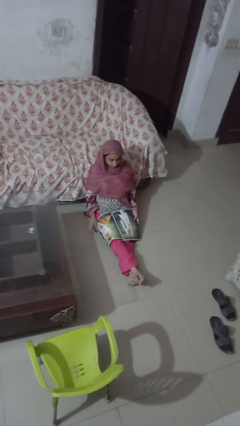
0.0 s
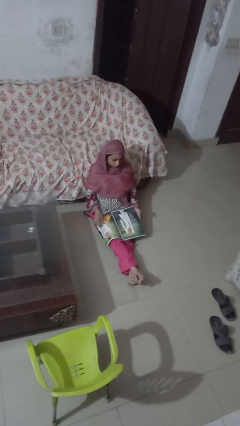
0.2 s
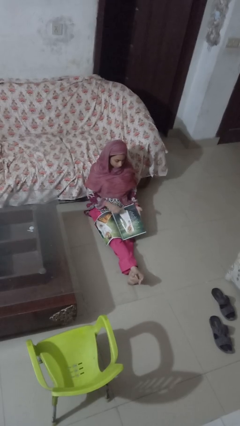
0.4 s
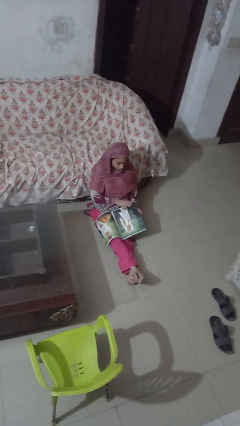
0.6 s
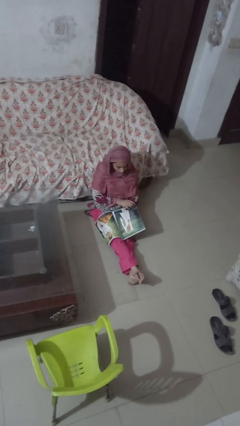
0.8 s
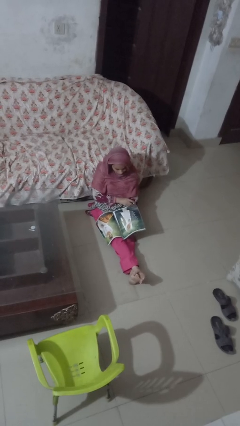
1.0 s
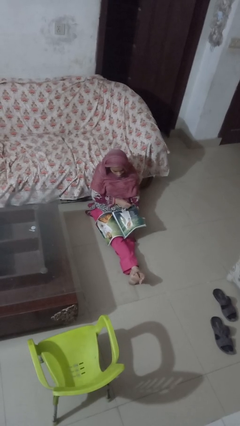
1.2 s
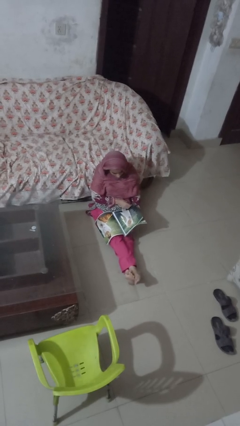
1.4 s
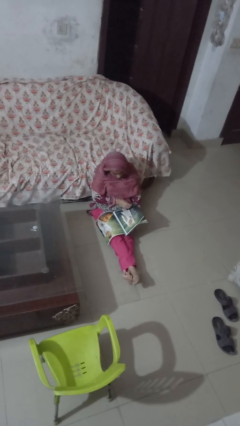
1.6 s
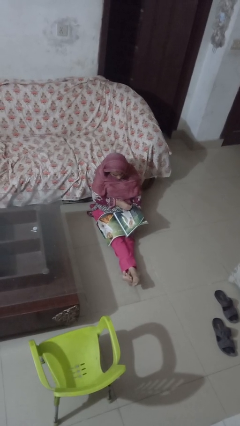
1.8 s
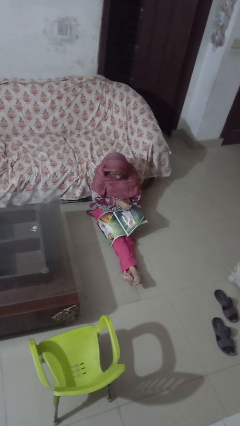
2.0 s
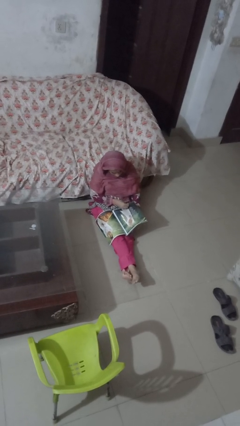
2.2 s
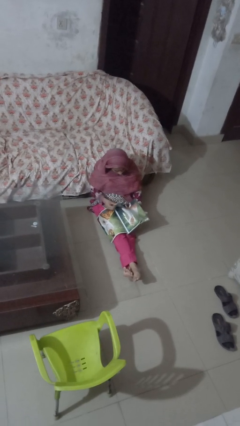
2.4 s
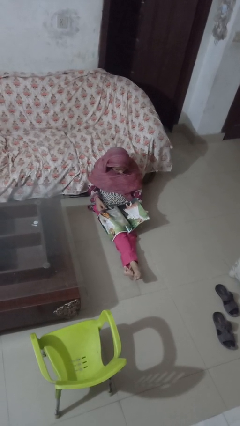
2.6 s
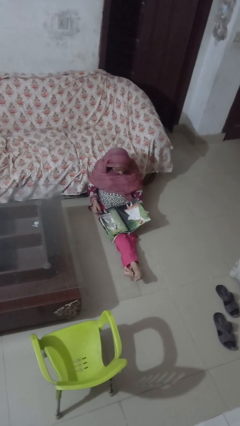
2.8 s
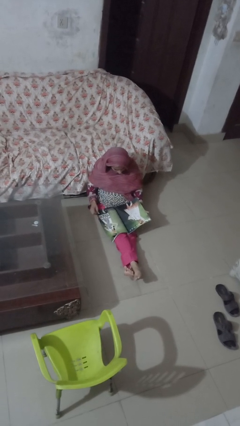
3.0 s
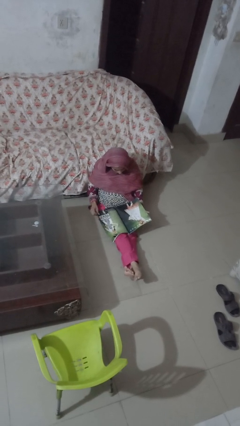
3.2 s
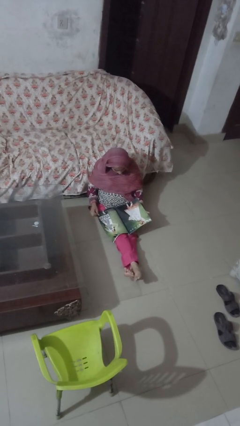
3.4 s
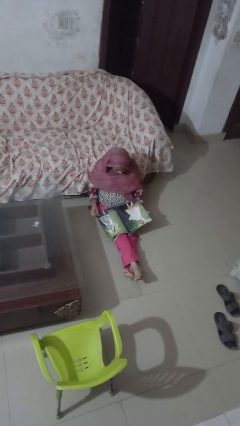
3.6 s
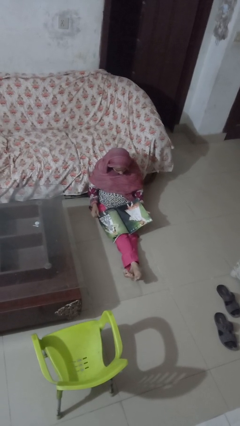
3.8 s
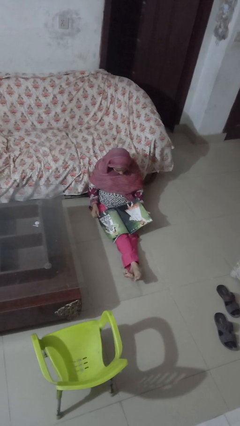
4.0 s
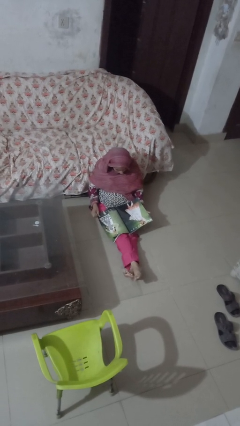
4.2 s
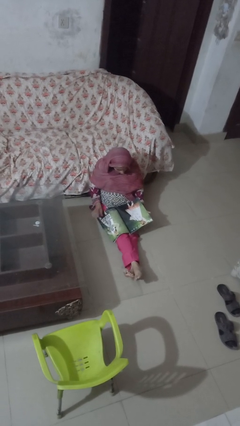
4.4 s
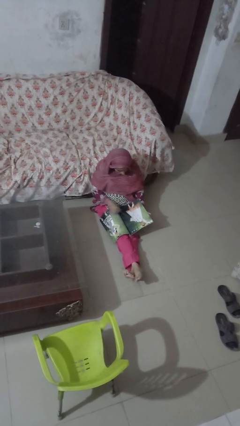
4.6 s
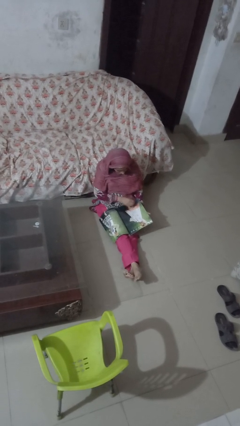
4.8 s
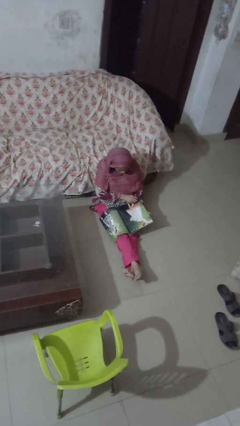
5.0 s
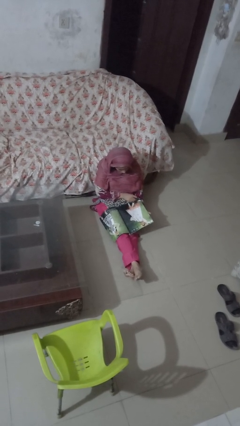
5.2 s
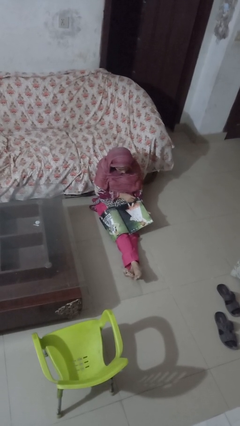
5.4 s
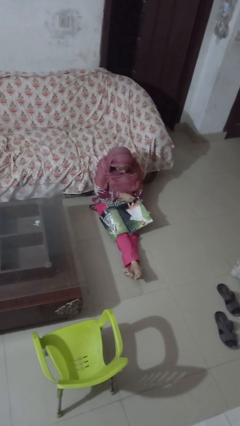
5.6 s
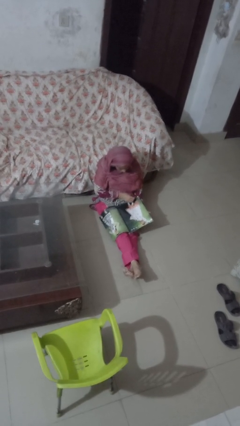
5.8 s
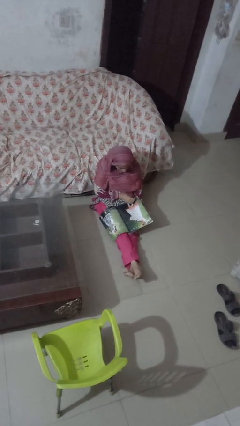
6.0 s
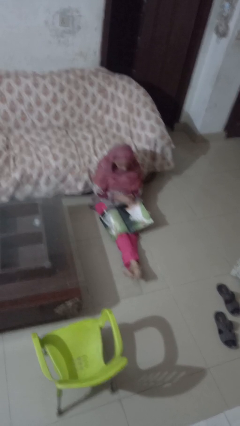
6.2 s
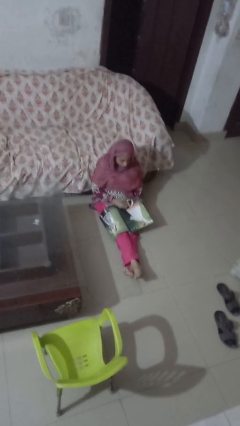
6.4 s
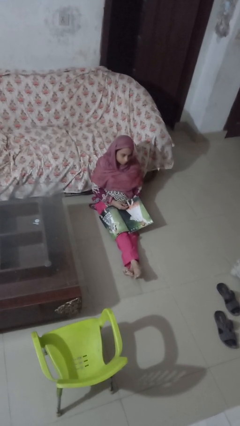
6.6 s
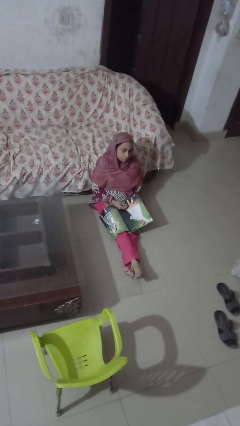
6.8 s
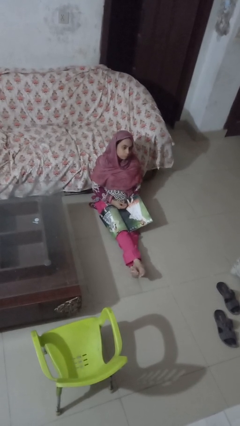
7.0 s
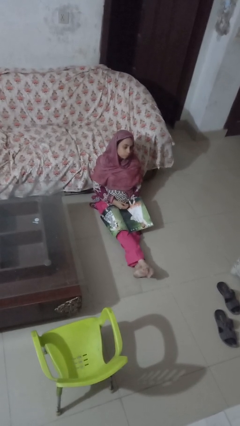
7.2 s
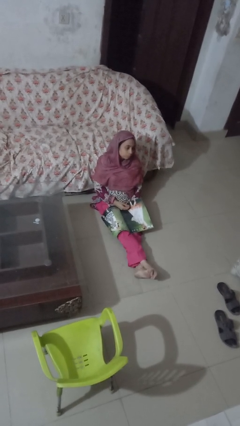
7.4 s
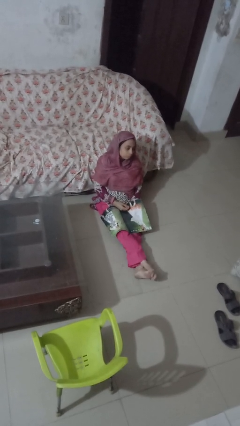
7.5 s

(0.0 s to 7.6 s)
person reads magazine

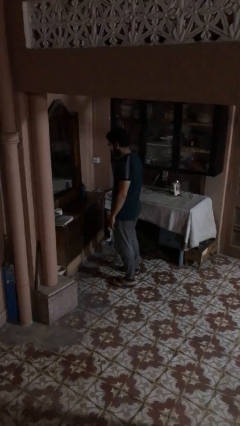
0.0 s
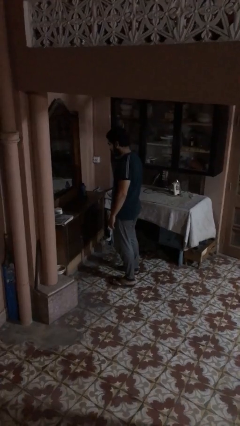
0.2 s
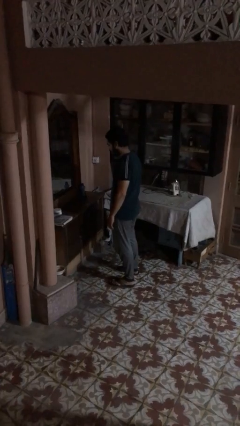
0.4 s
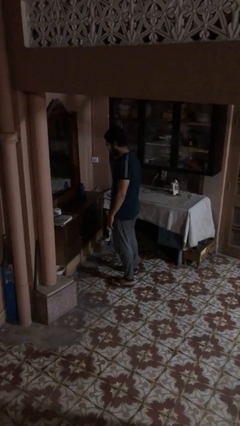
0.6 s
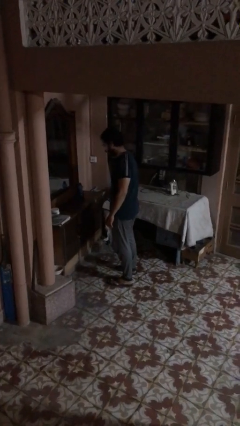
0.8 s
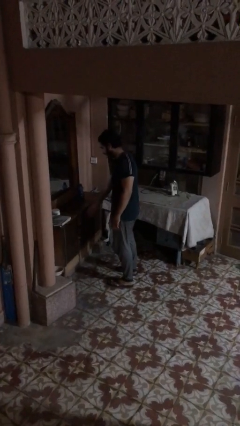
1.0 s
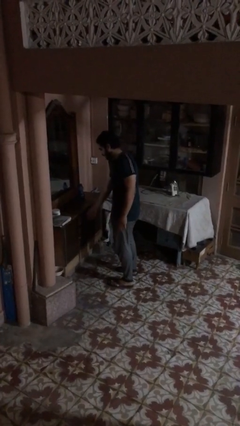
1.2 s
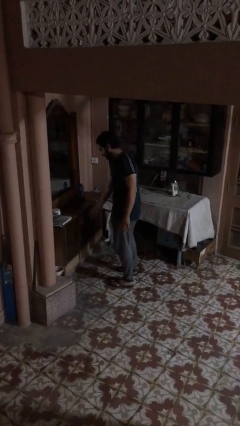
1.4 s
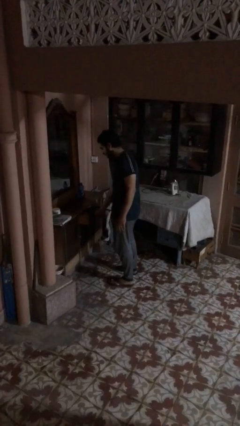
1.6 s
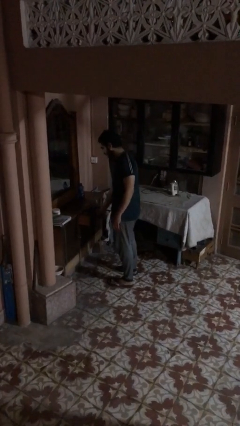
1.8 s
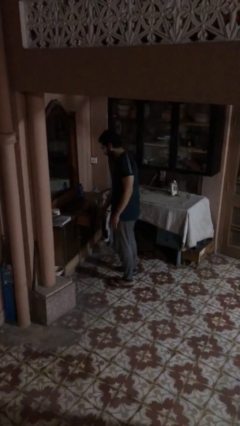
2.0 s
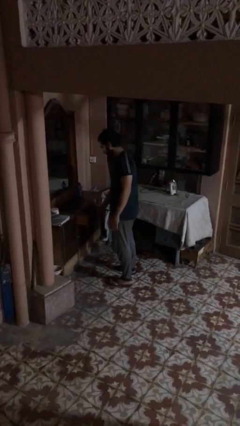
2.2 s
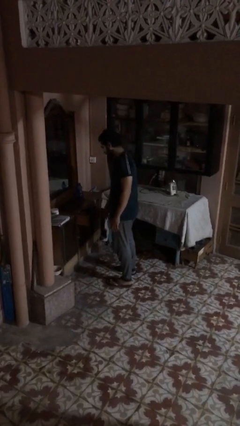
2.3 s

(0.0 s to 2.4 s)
person opens dresser drawer

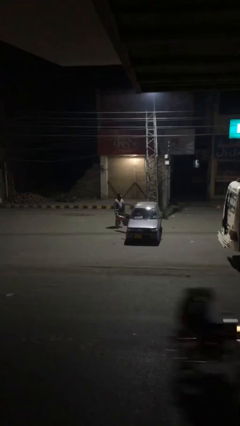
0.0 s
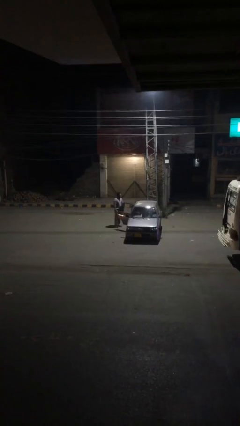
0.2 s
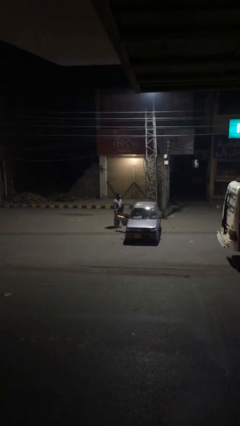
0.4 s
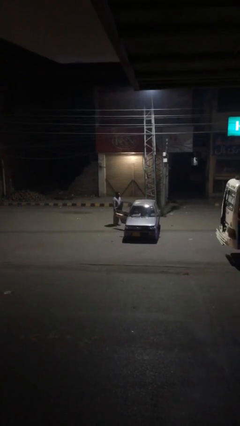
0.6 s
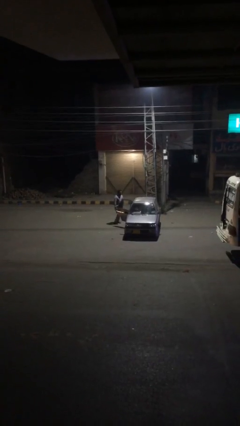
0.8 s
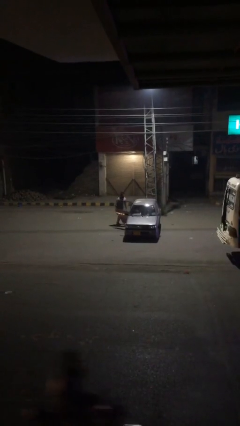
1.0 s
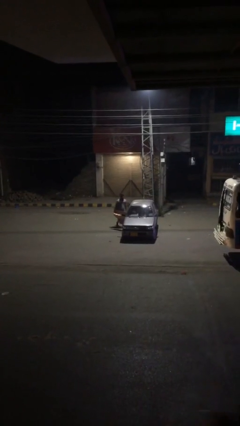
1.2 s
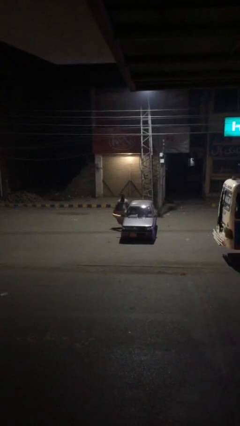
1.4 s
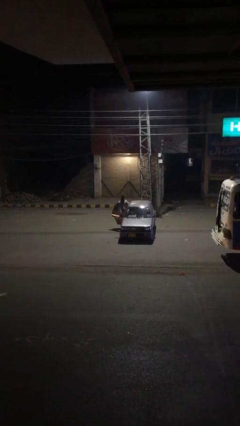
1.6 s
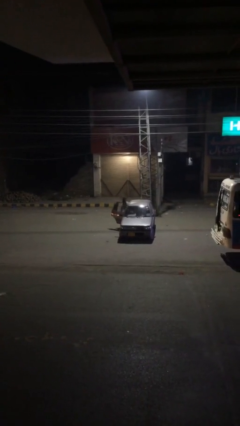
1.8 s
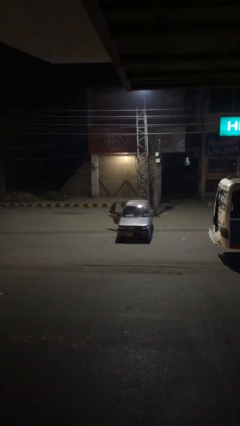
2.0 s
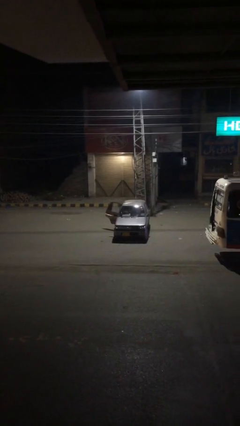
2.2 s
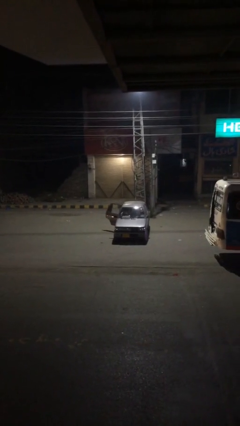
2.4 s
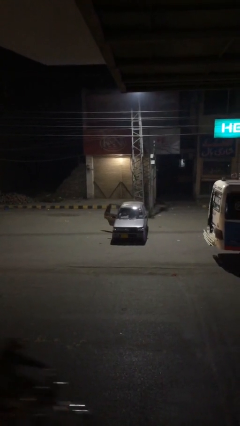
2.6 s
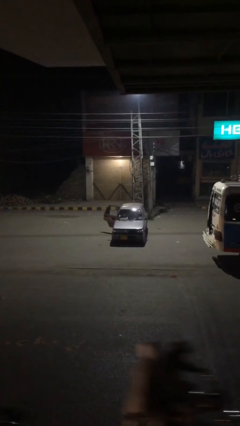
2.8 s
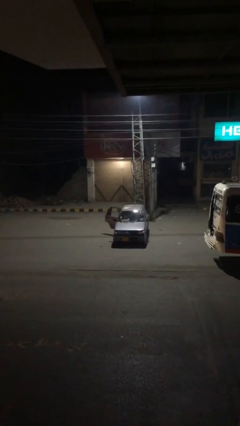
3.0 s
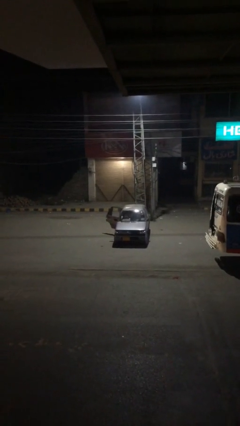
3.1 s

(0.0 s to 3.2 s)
person enters car

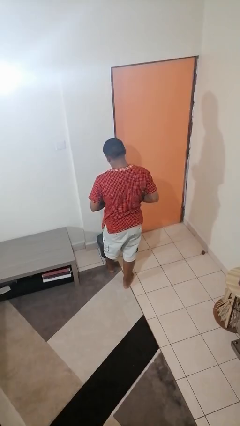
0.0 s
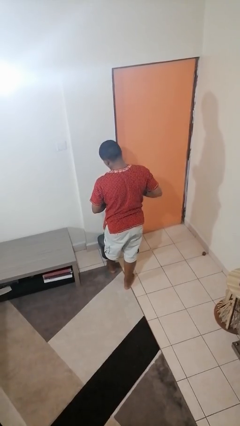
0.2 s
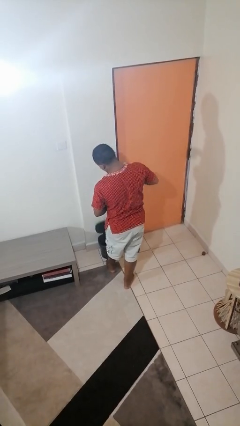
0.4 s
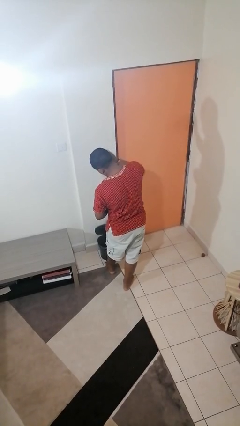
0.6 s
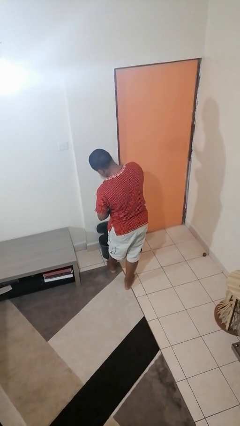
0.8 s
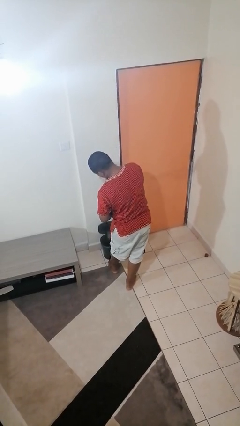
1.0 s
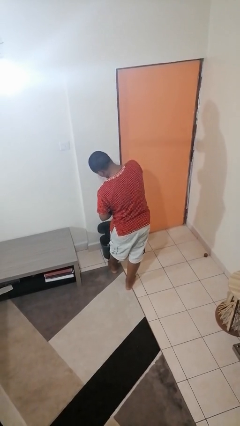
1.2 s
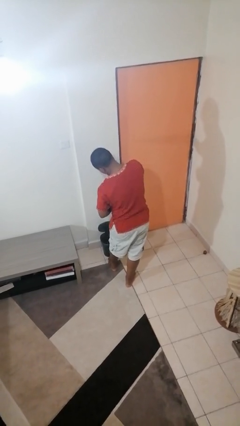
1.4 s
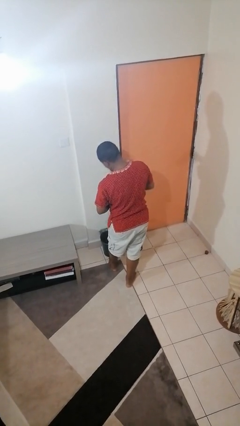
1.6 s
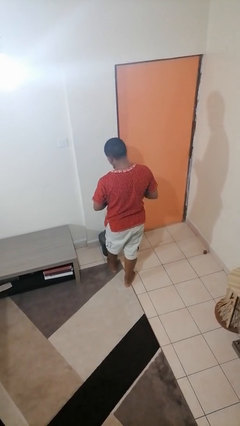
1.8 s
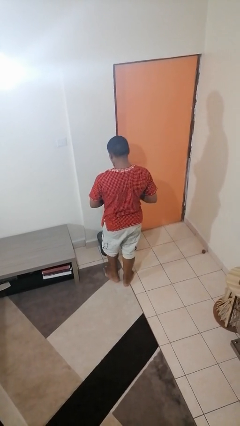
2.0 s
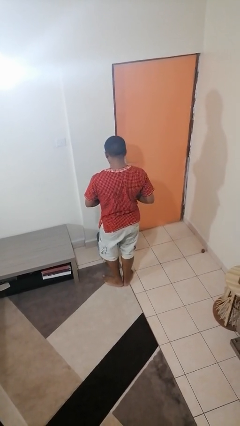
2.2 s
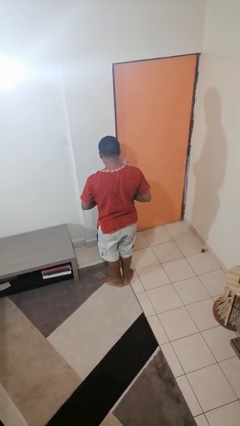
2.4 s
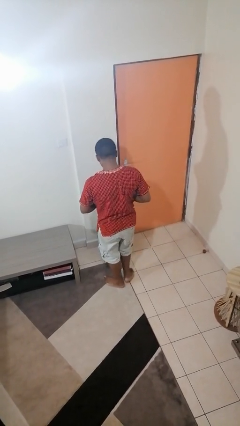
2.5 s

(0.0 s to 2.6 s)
person discards trash

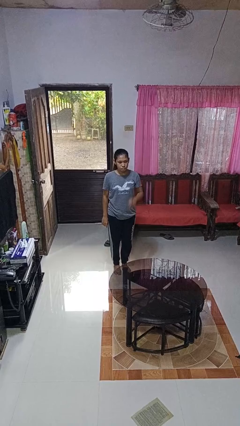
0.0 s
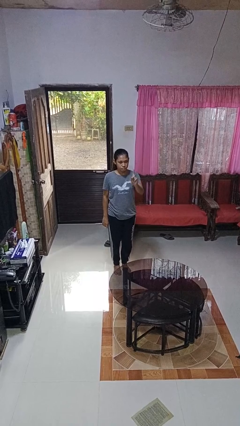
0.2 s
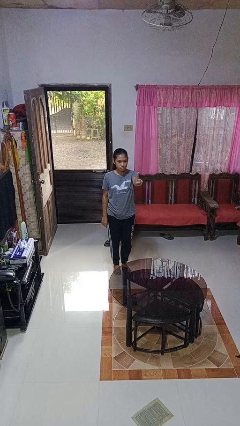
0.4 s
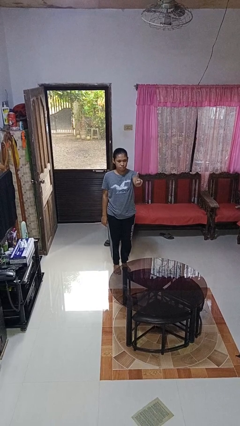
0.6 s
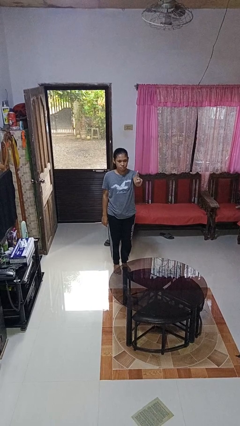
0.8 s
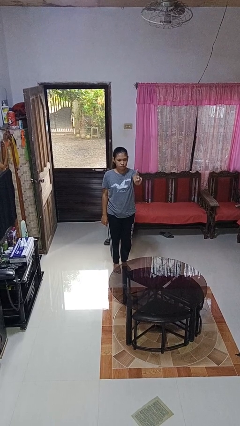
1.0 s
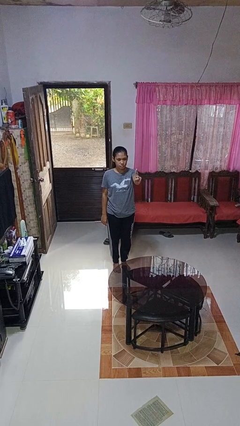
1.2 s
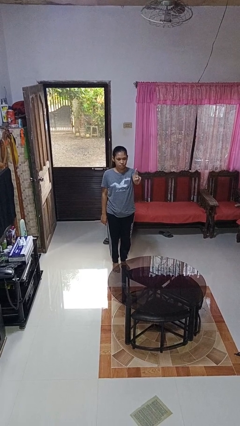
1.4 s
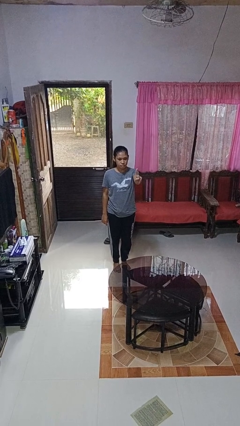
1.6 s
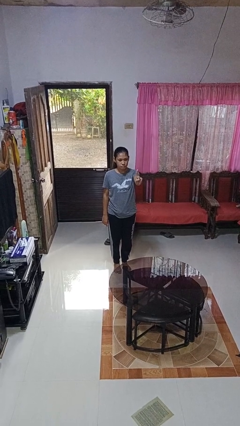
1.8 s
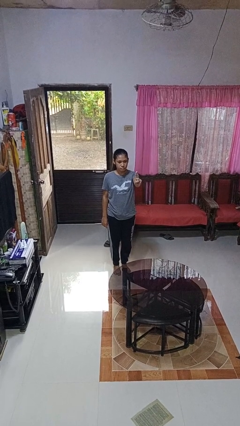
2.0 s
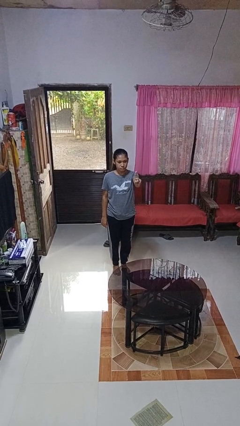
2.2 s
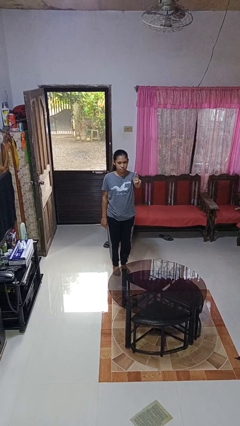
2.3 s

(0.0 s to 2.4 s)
person gestures number one
